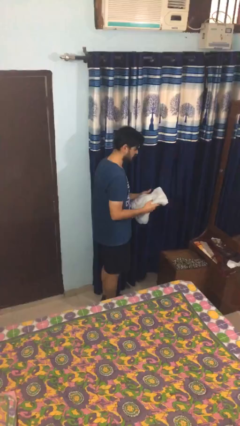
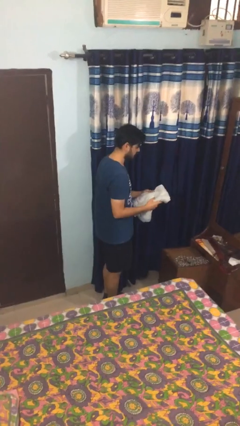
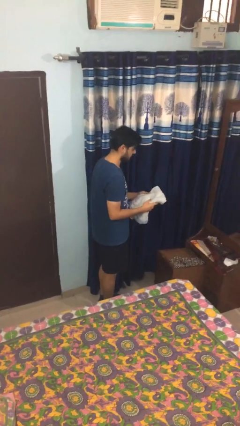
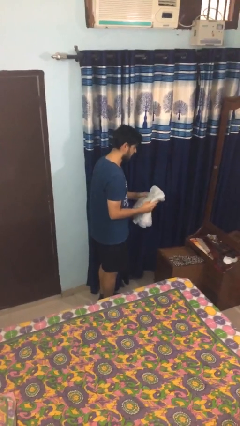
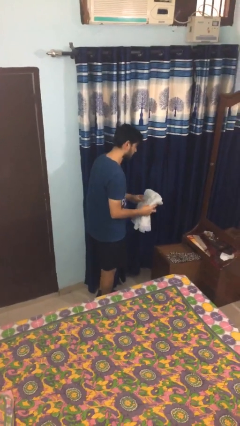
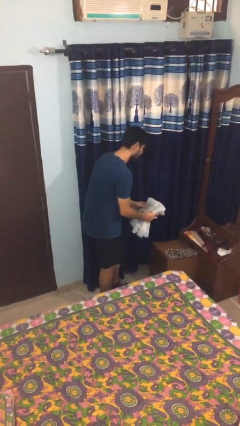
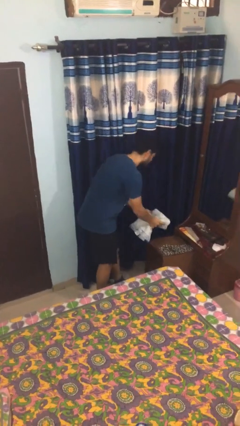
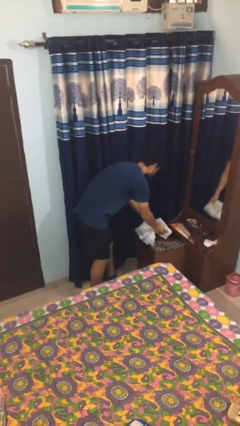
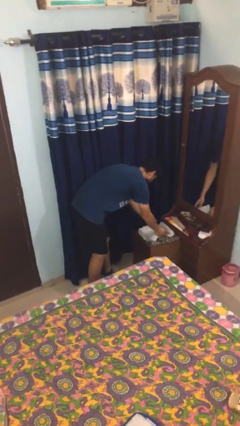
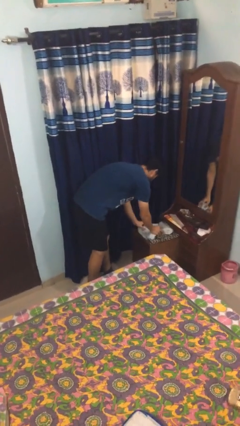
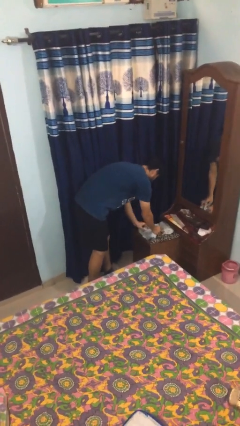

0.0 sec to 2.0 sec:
person puts clothes into dresser

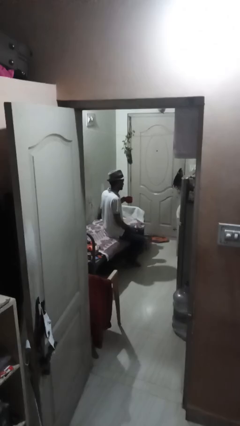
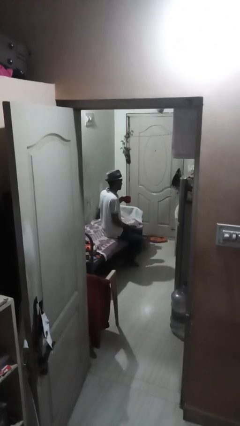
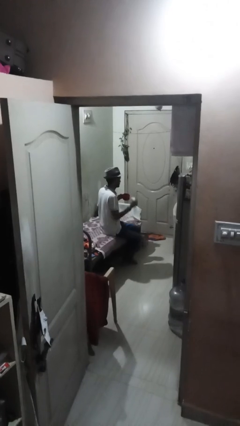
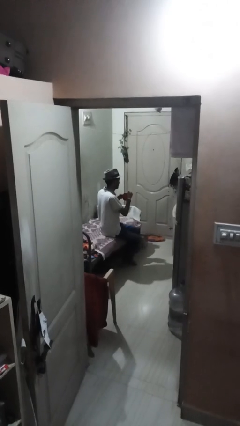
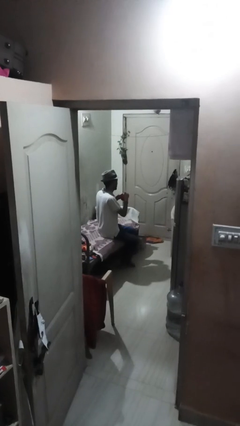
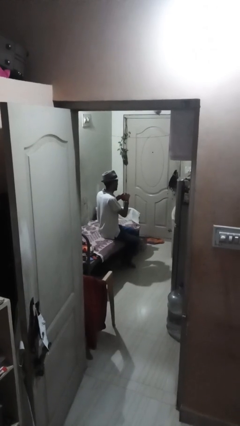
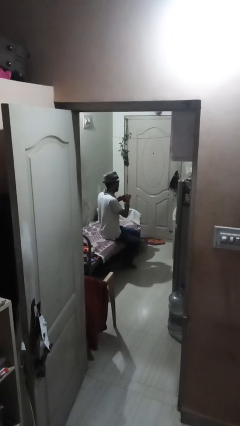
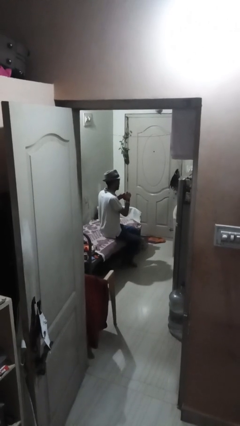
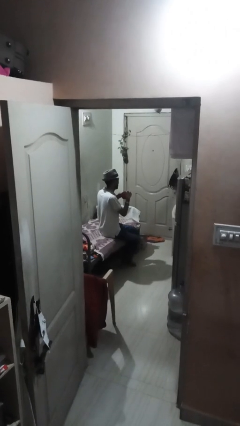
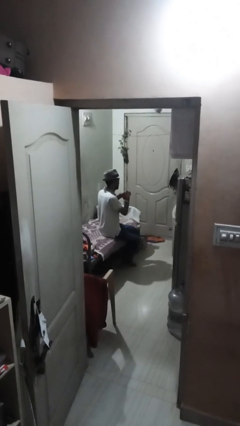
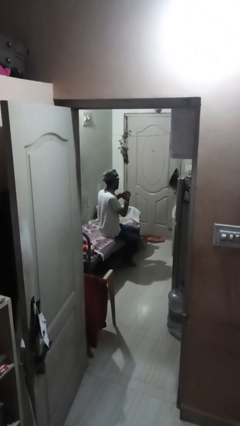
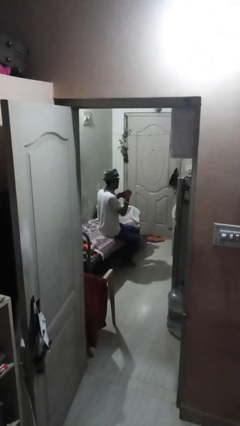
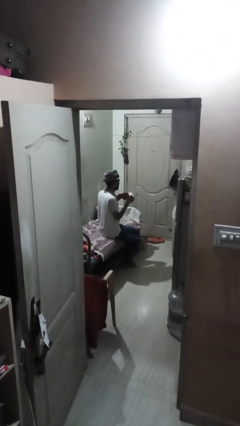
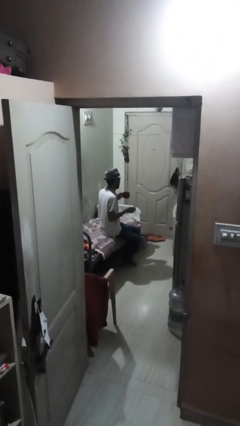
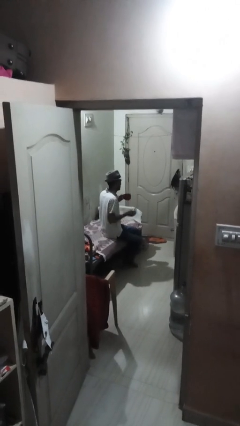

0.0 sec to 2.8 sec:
person stirs mug

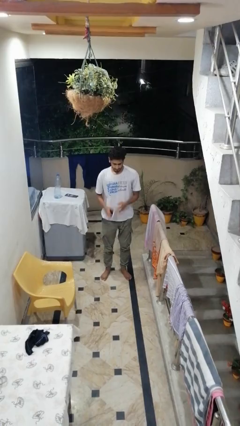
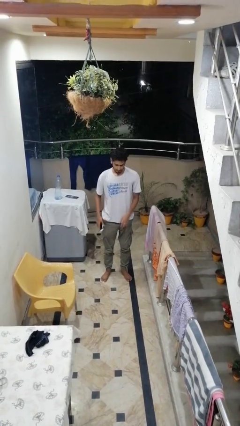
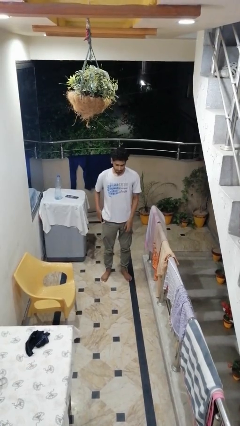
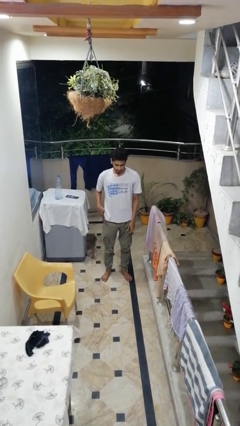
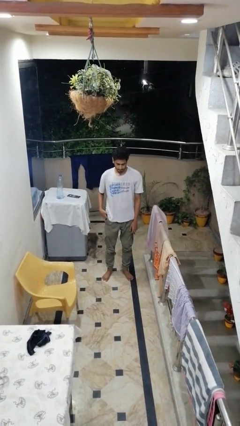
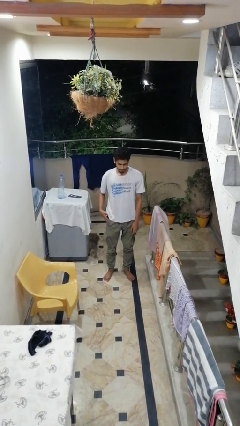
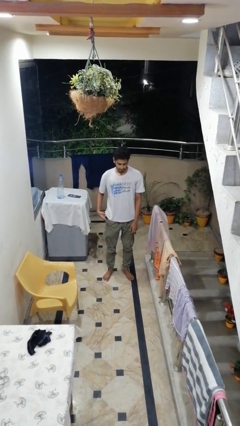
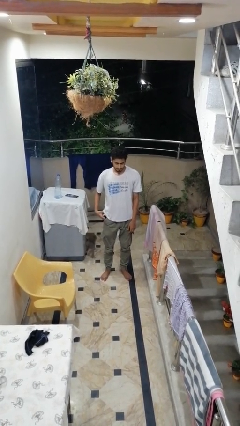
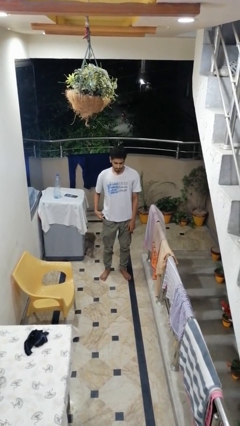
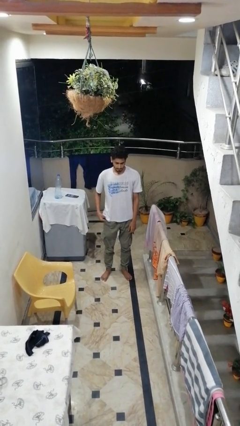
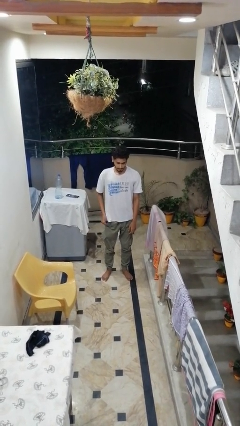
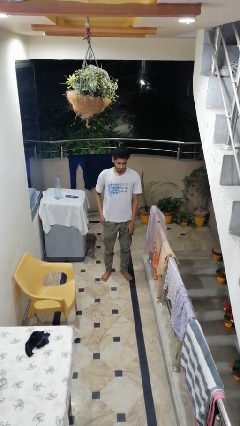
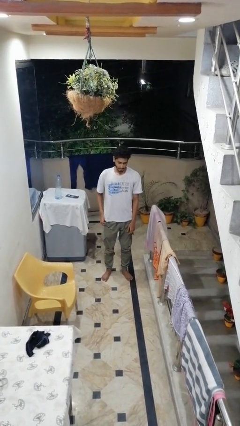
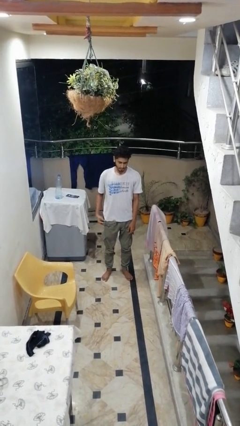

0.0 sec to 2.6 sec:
person puts phone into pocket

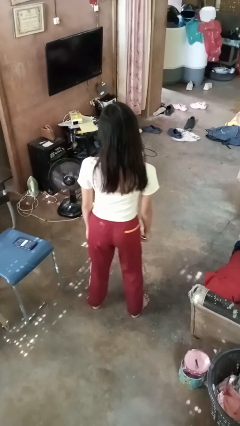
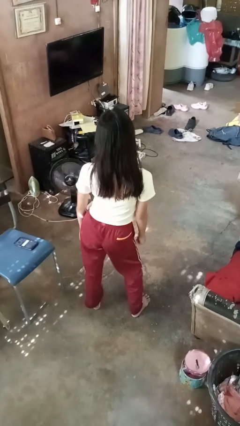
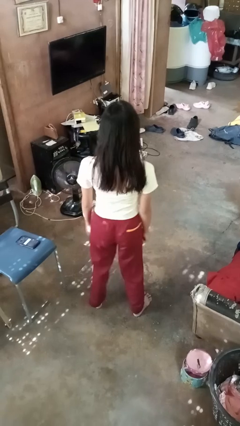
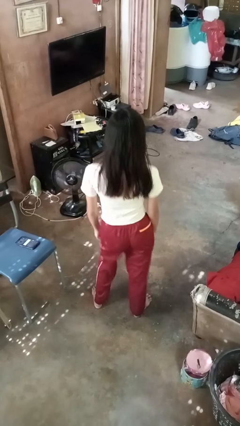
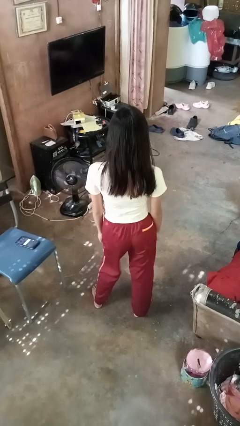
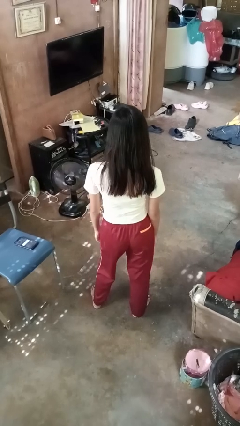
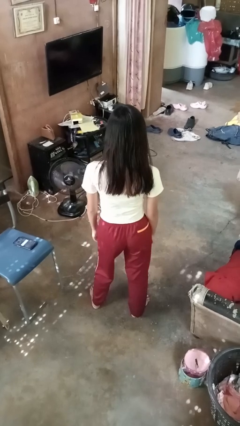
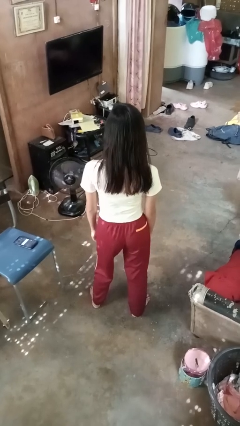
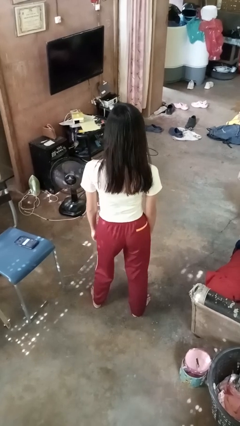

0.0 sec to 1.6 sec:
person wiggles hips

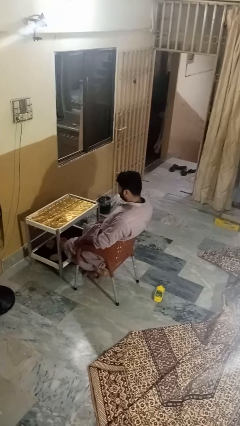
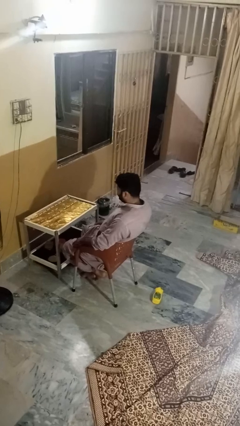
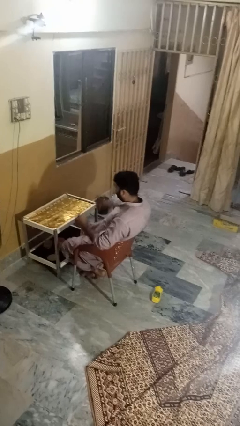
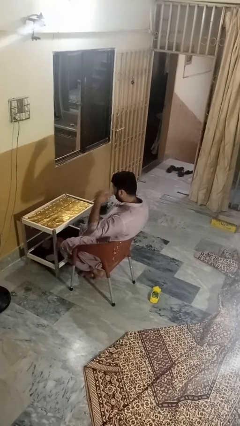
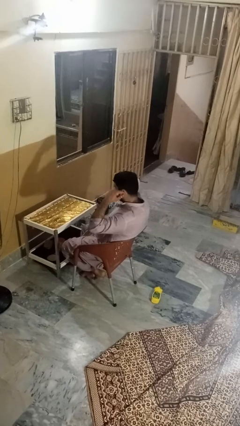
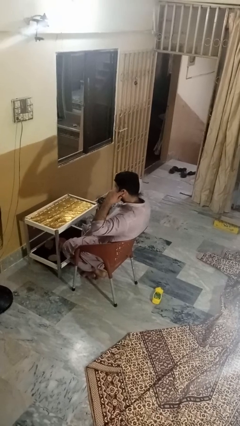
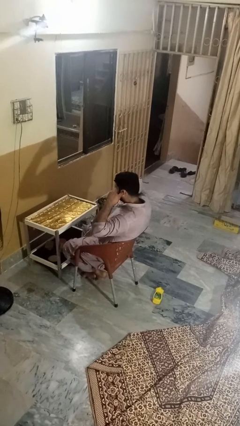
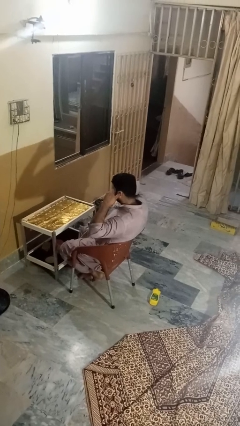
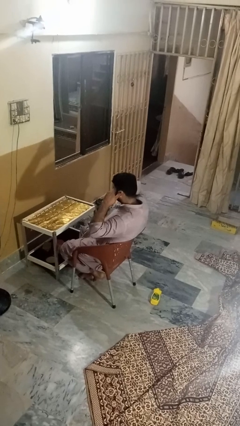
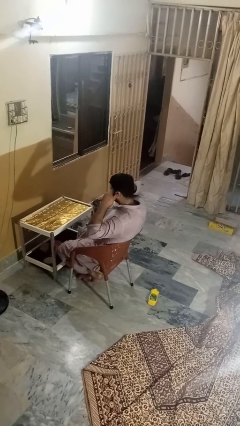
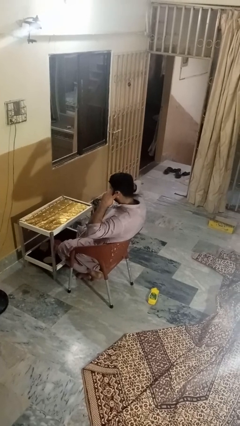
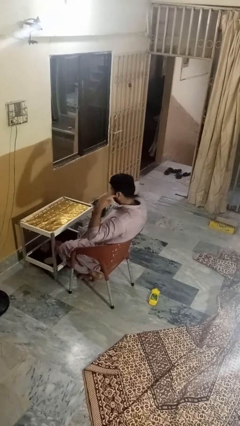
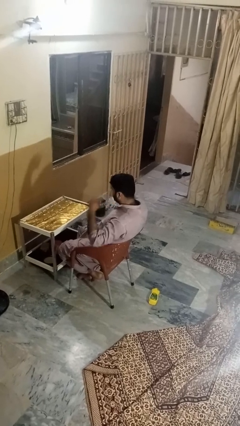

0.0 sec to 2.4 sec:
person puts fingers in ear

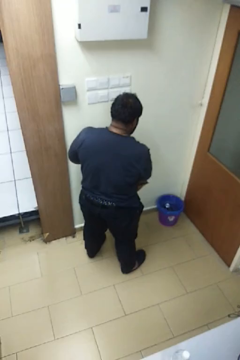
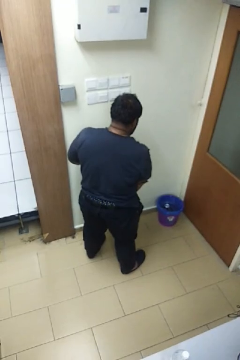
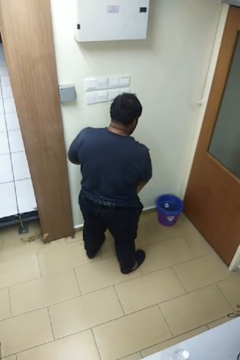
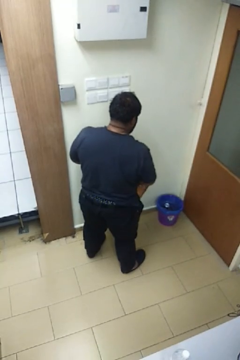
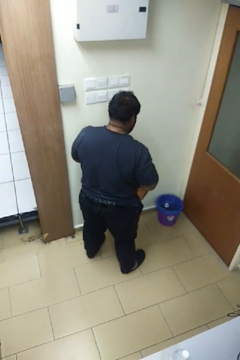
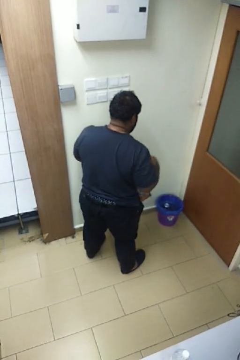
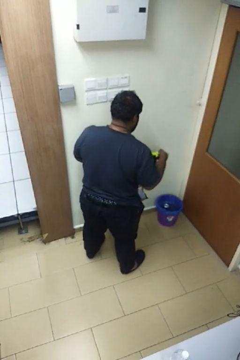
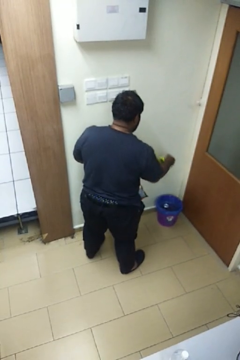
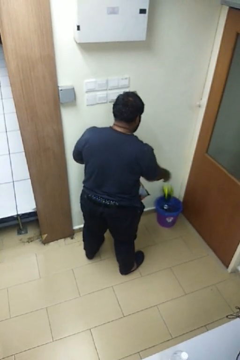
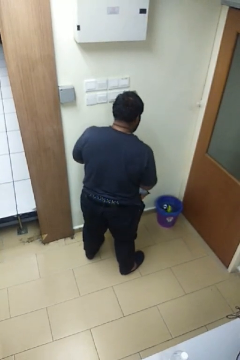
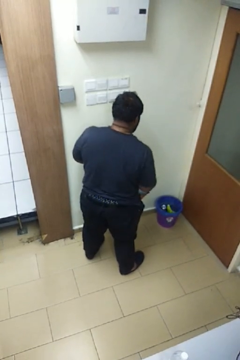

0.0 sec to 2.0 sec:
person discards trash

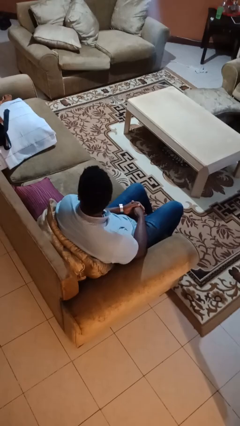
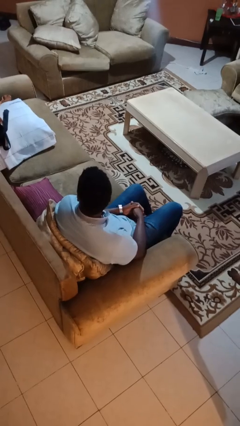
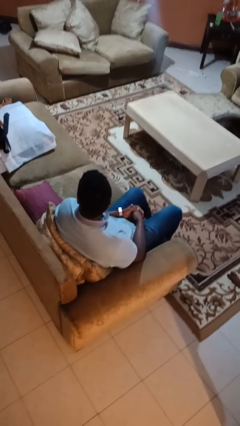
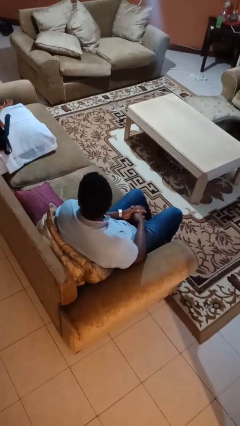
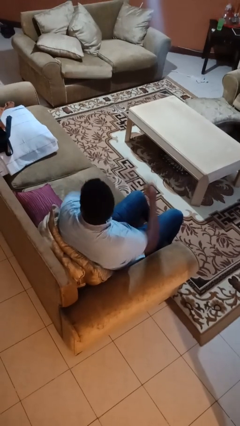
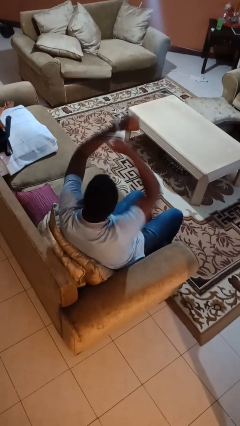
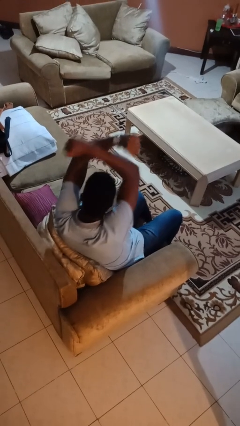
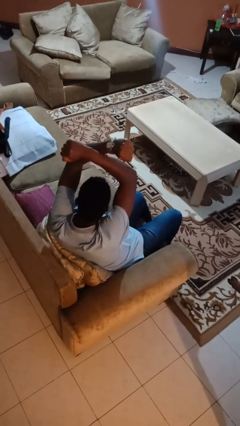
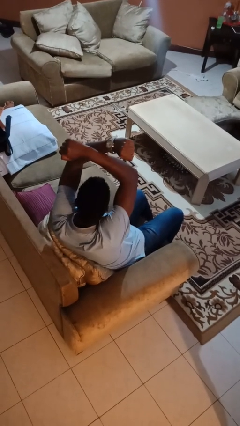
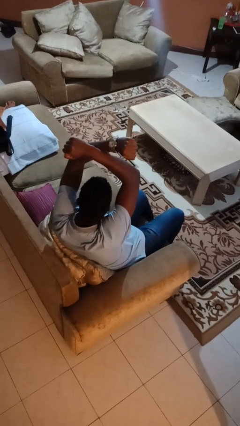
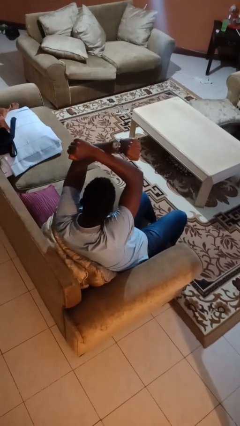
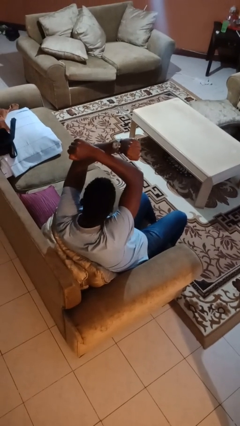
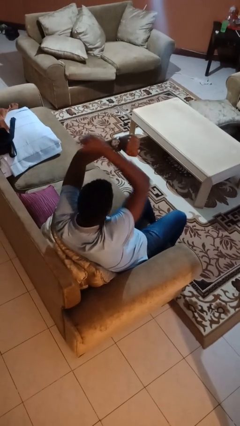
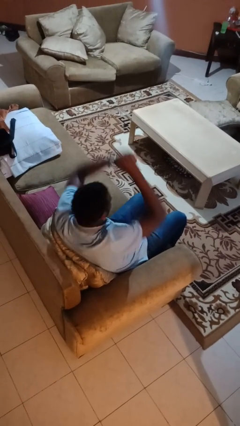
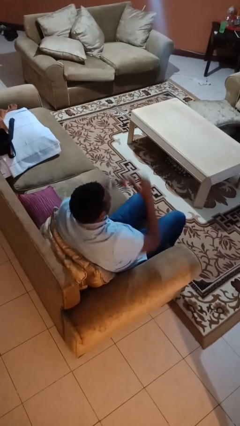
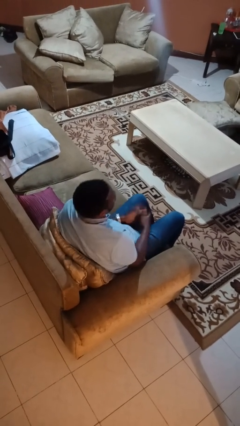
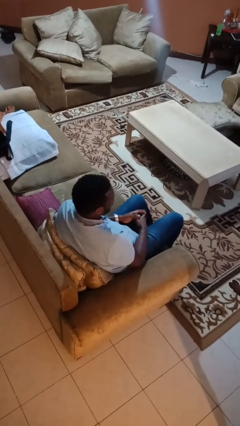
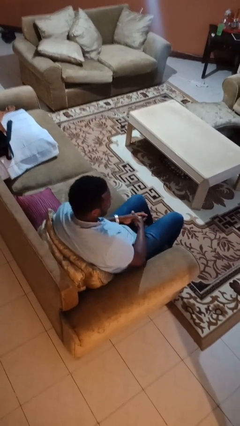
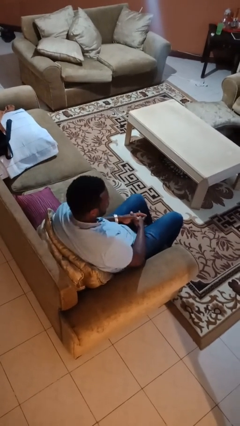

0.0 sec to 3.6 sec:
person gestures arms x

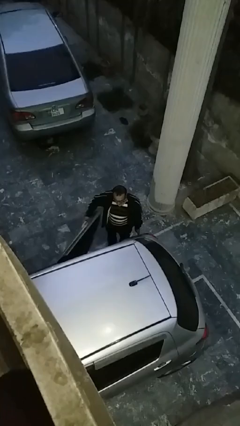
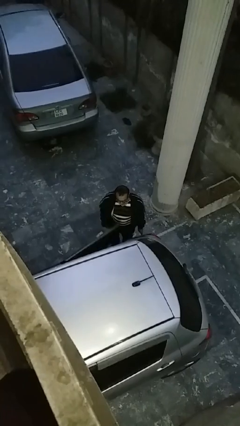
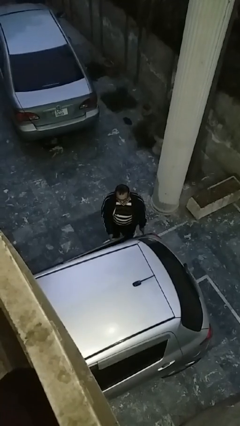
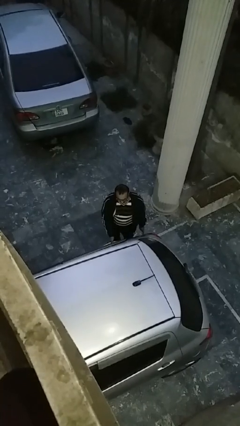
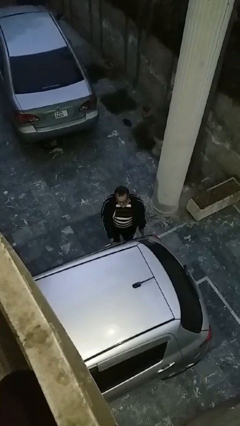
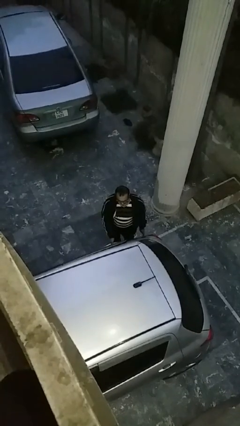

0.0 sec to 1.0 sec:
person closes car door
